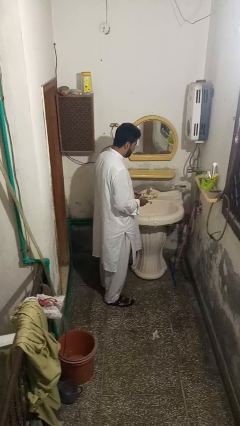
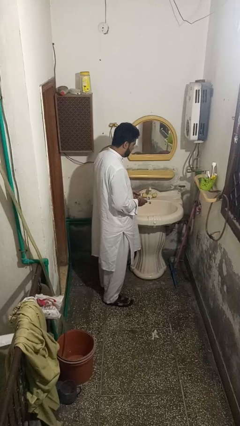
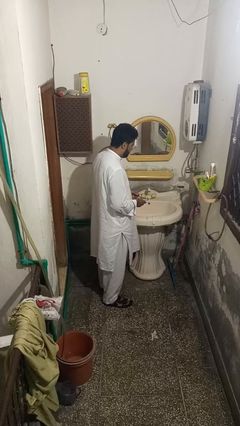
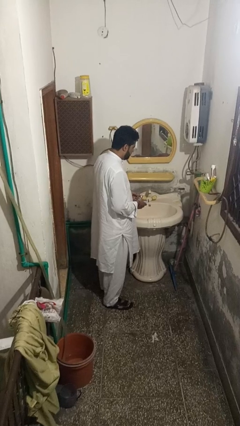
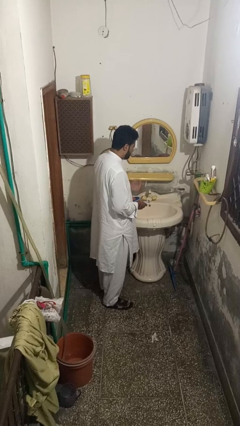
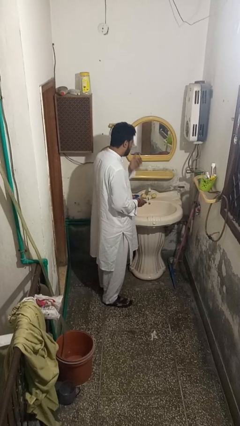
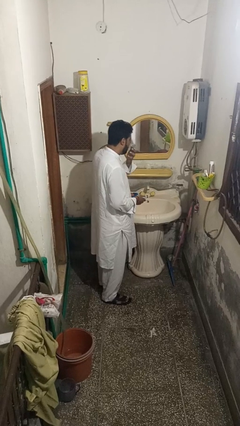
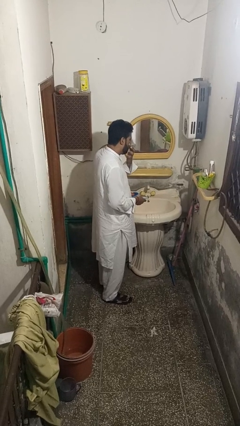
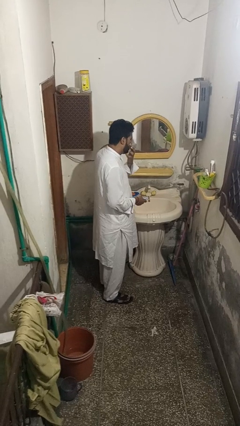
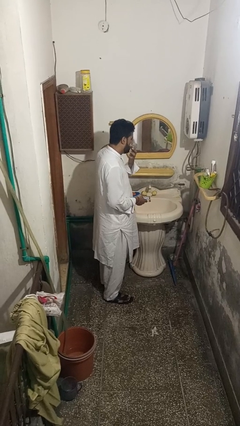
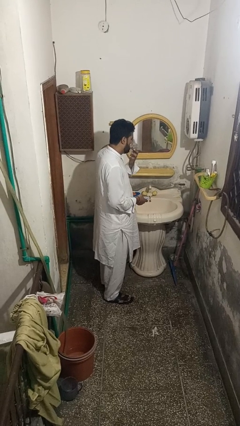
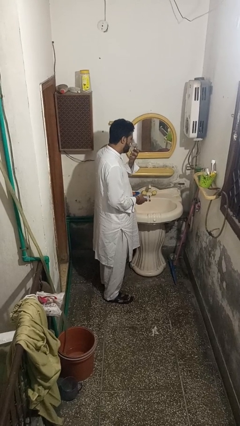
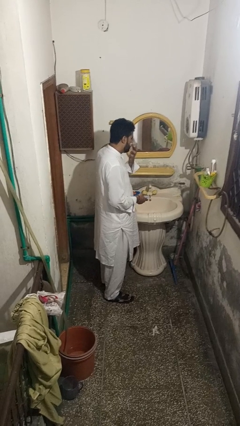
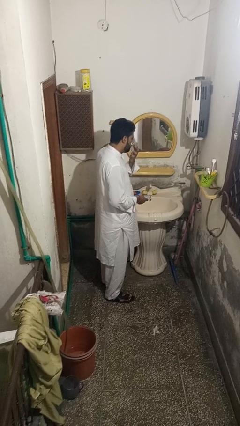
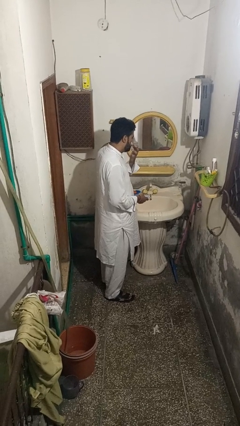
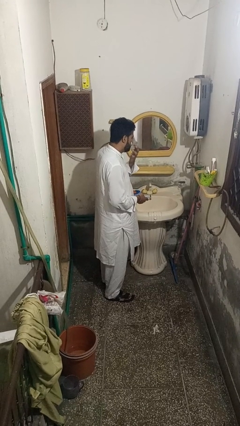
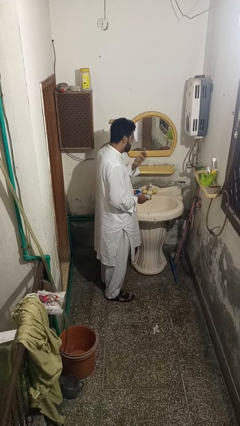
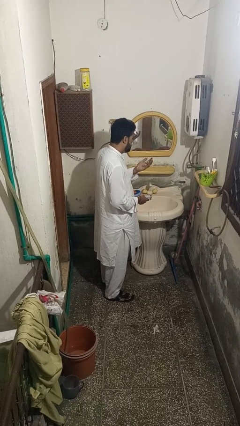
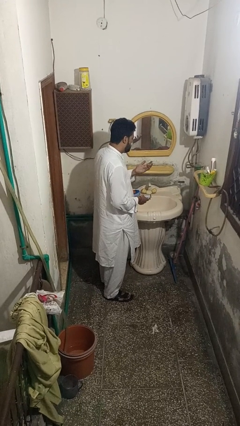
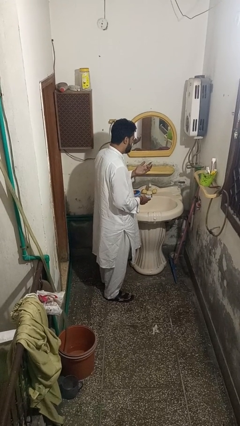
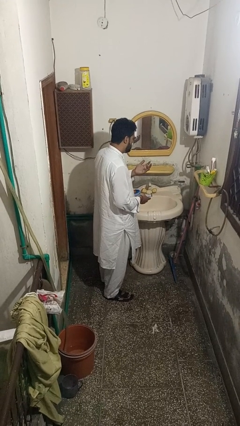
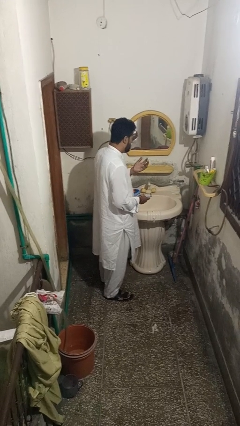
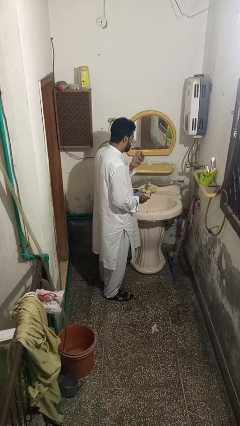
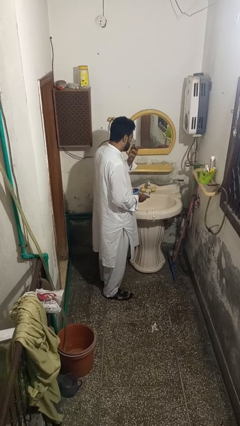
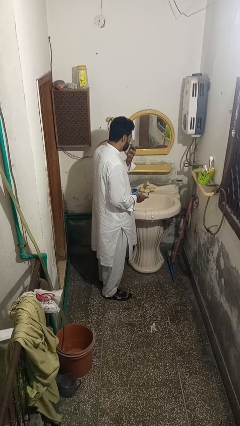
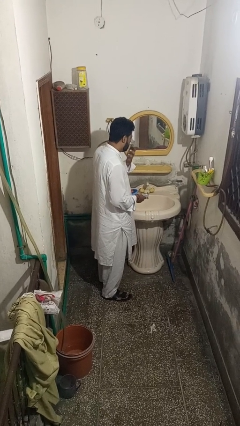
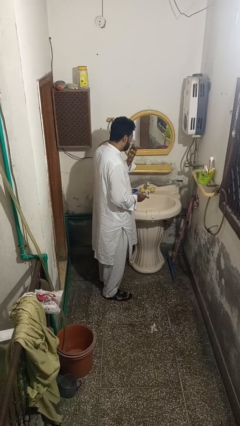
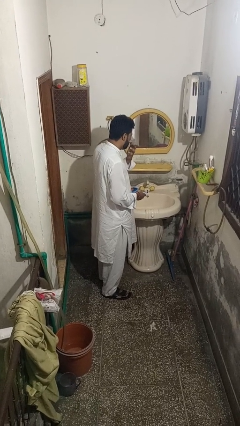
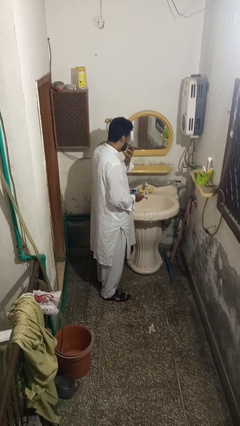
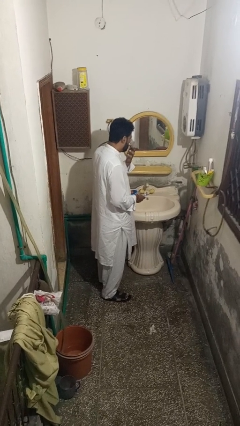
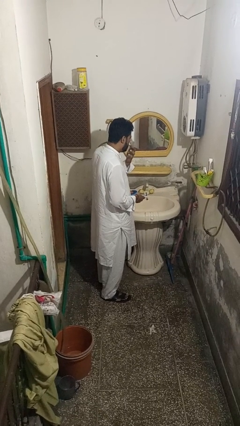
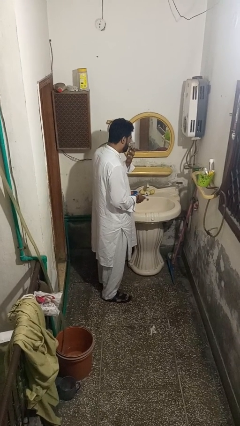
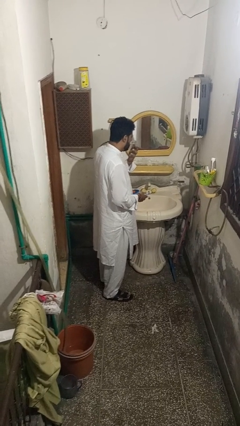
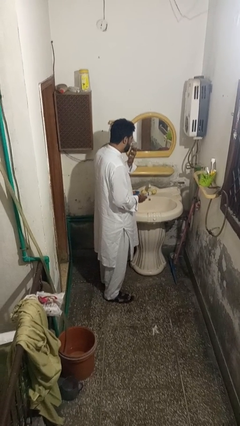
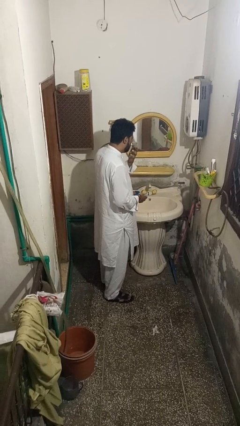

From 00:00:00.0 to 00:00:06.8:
person applies shaving cream

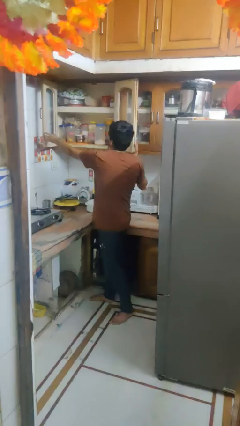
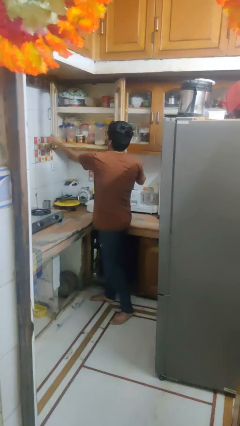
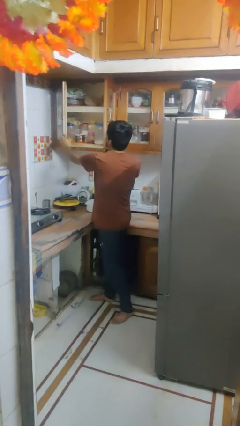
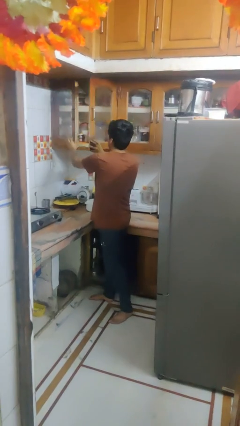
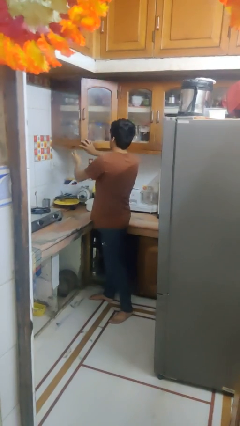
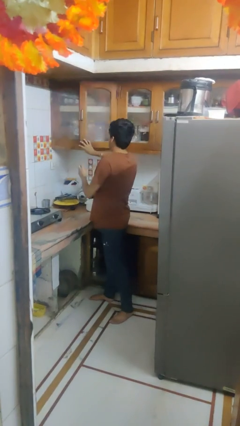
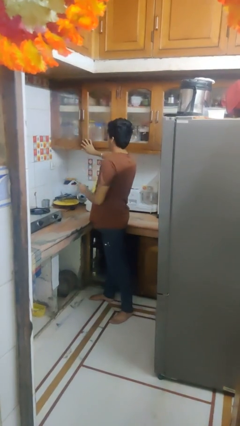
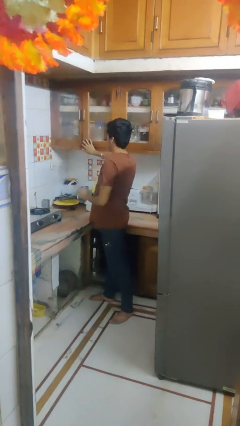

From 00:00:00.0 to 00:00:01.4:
person closes cabinet

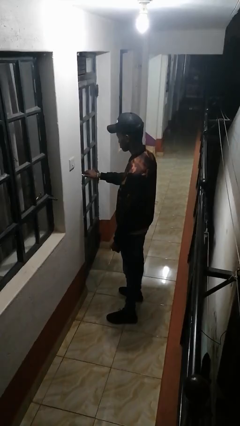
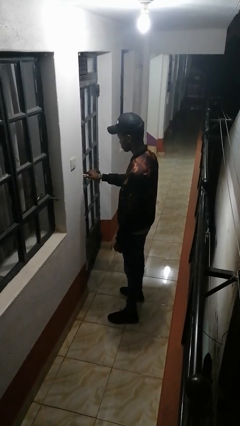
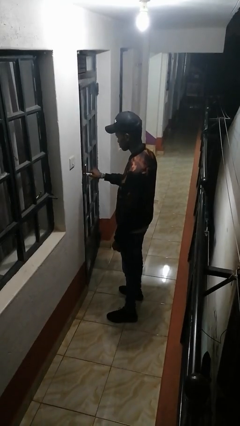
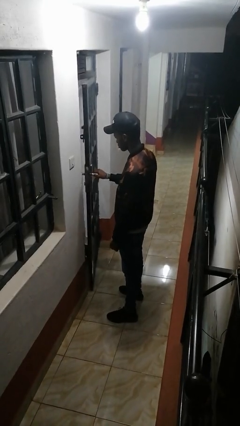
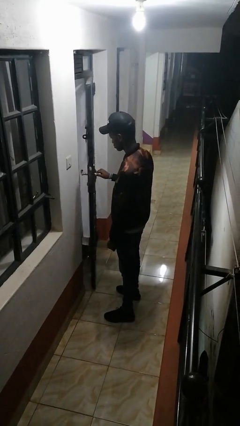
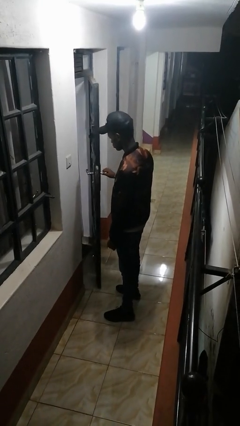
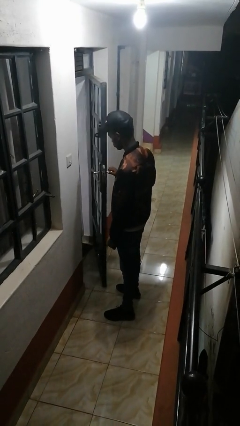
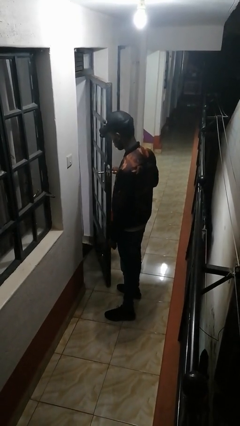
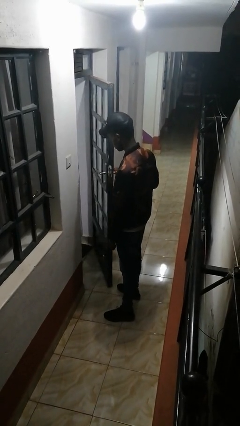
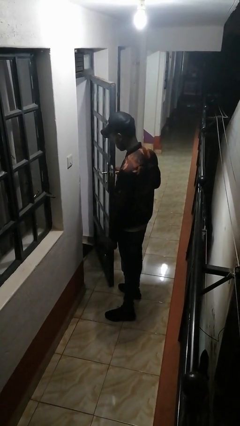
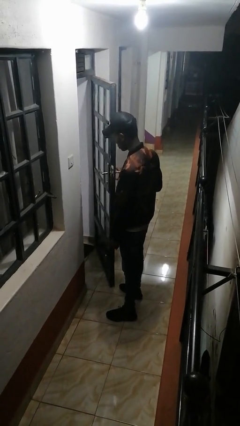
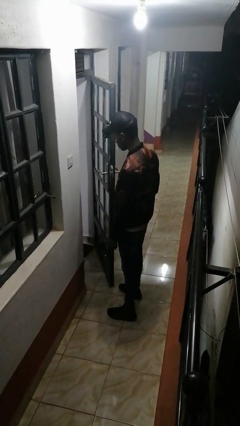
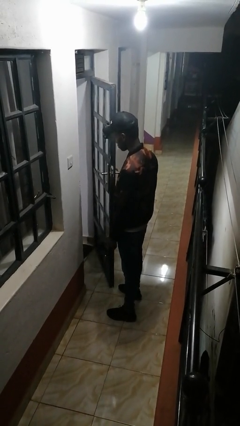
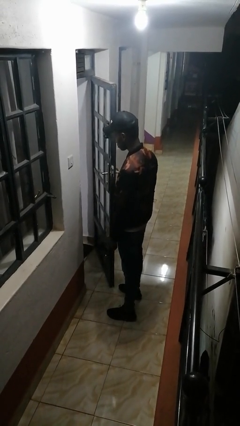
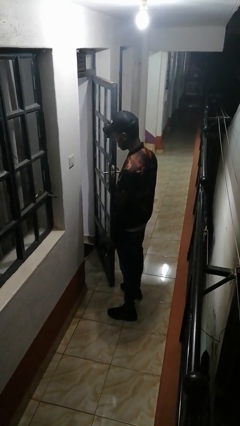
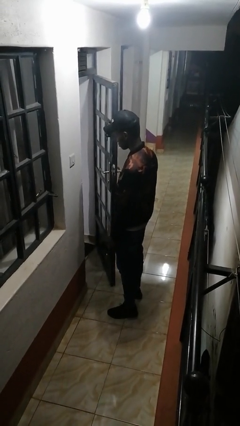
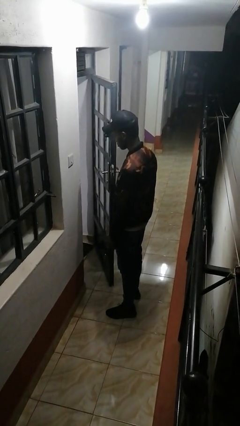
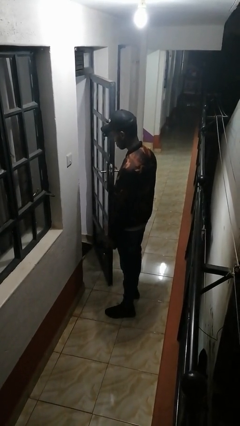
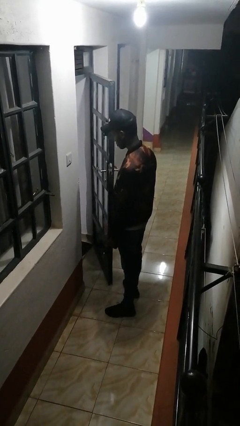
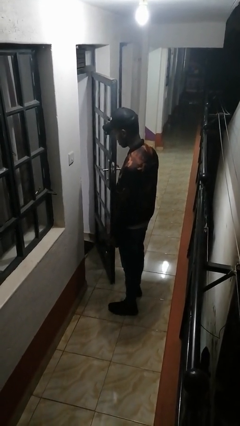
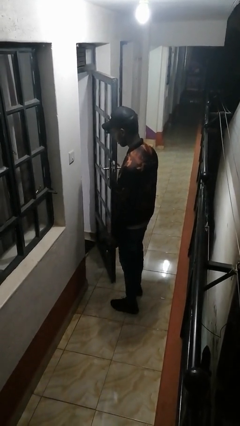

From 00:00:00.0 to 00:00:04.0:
person opens facility door

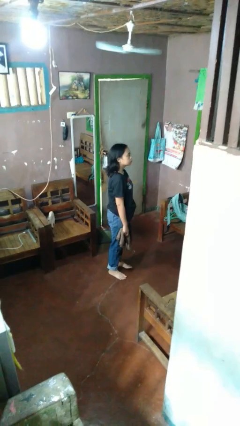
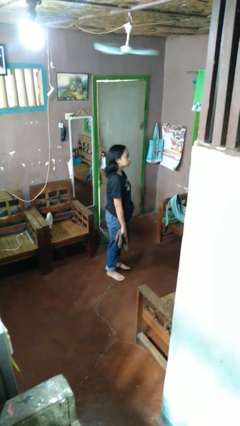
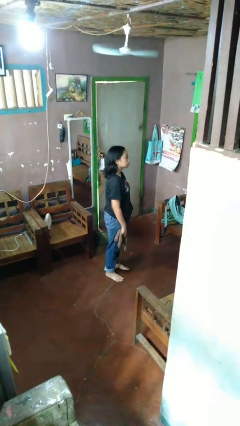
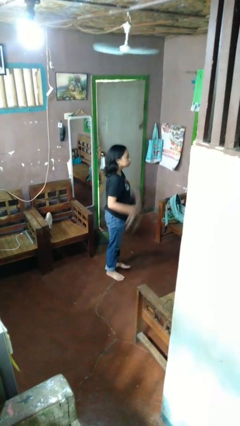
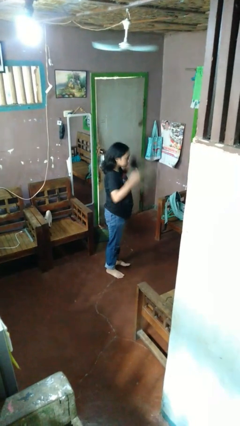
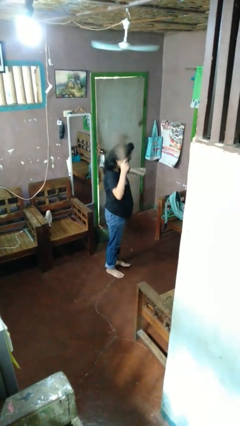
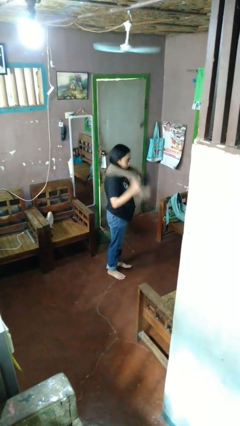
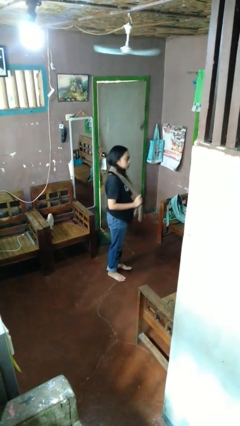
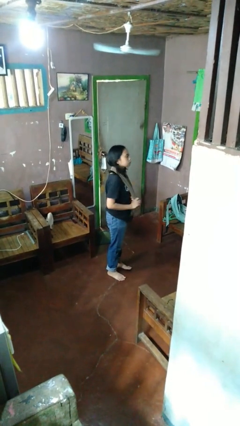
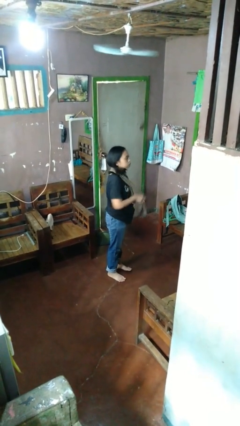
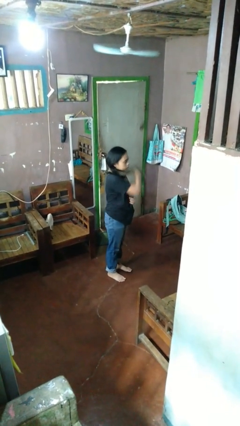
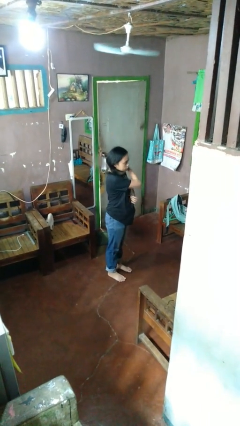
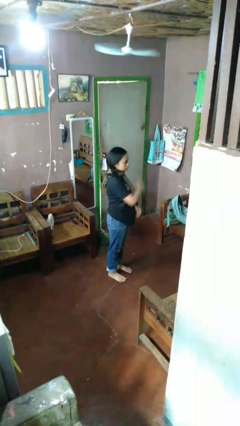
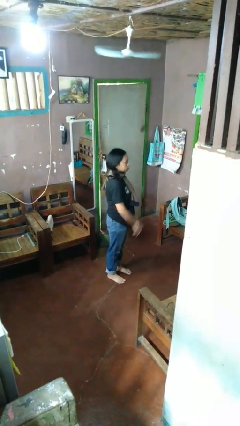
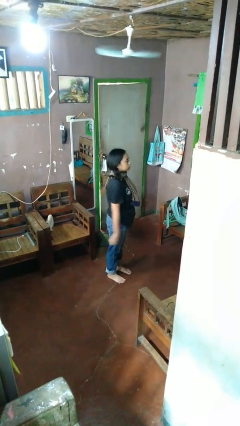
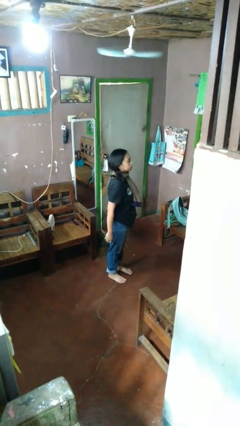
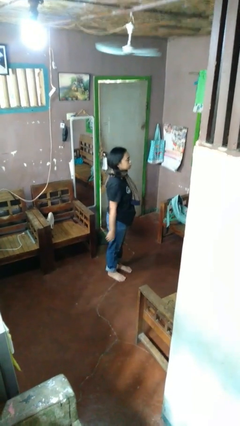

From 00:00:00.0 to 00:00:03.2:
person puts on scarf
